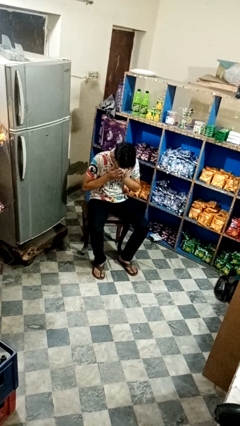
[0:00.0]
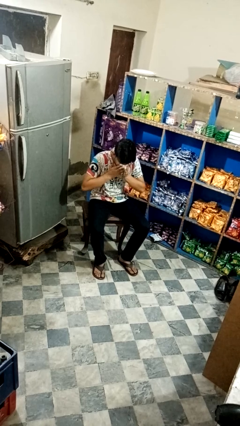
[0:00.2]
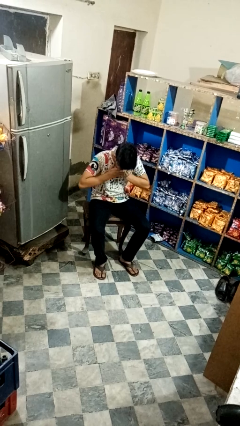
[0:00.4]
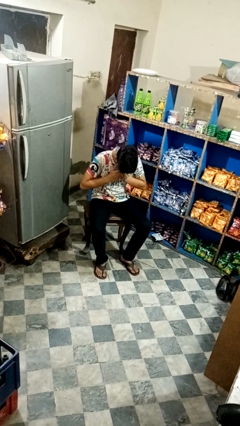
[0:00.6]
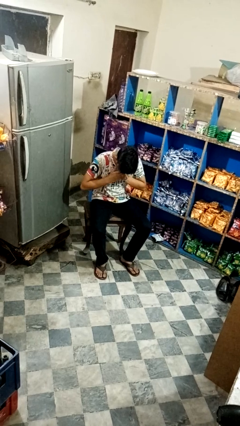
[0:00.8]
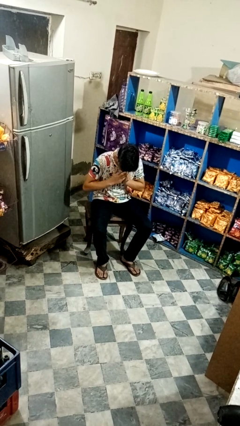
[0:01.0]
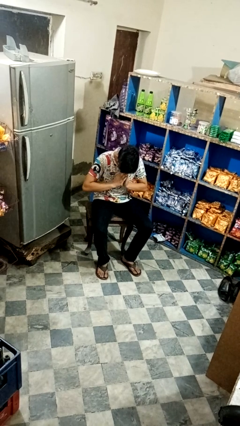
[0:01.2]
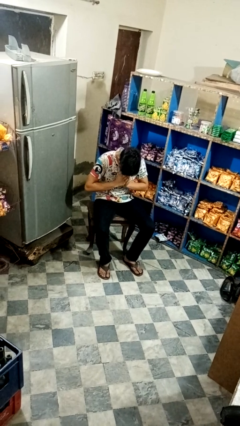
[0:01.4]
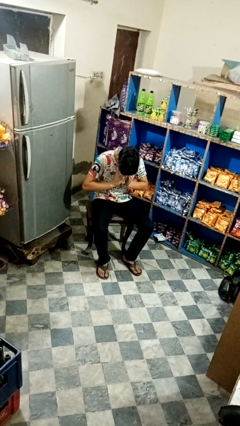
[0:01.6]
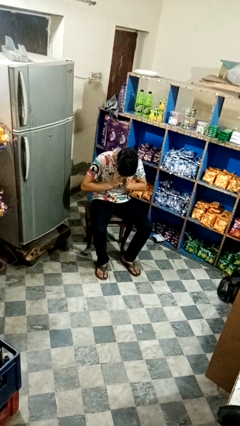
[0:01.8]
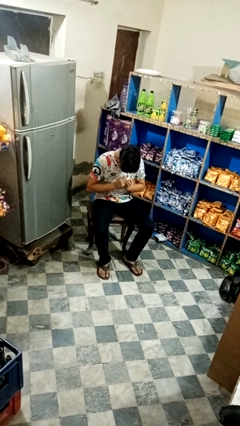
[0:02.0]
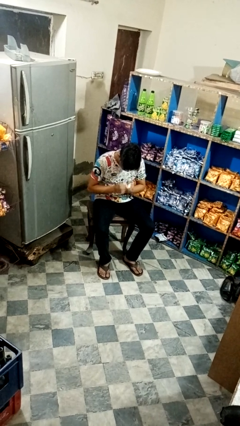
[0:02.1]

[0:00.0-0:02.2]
person blows nose

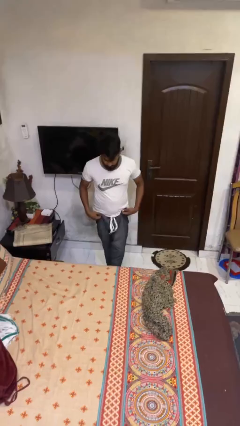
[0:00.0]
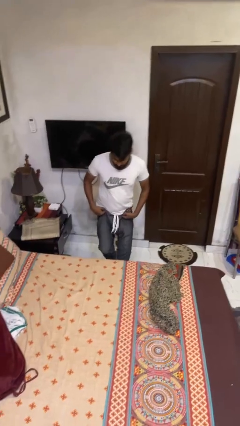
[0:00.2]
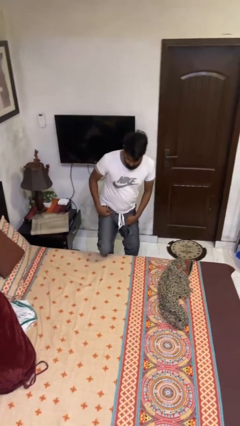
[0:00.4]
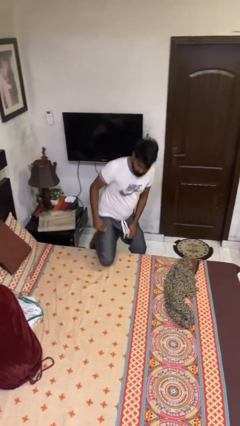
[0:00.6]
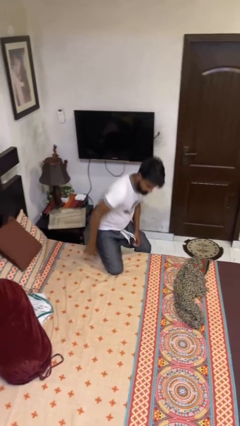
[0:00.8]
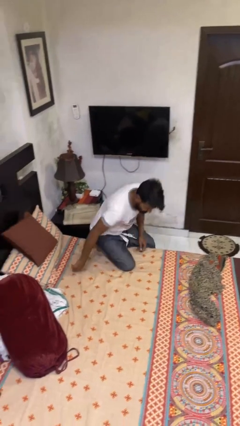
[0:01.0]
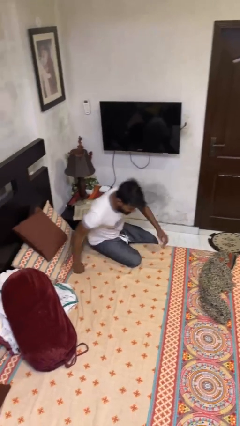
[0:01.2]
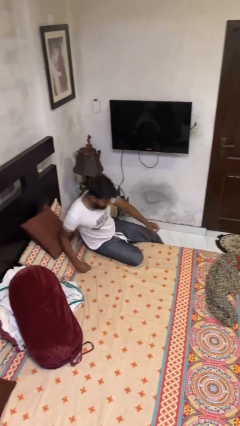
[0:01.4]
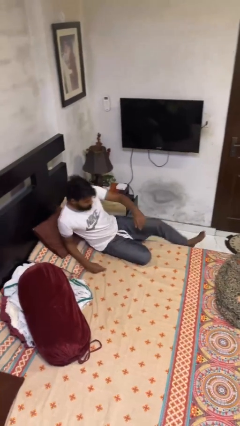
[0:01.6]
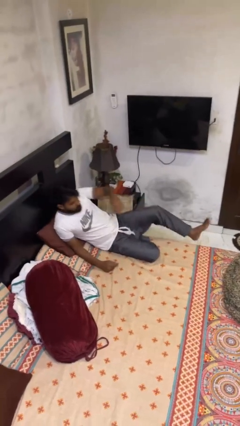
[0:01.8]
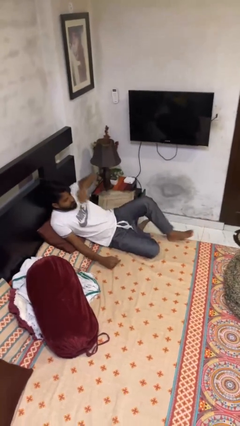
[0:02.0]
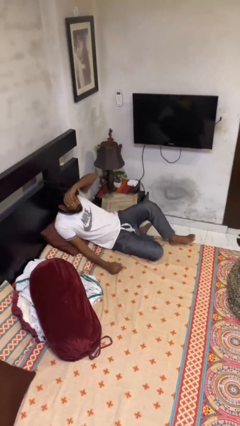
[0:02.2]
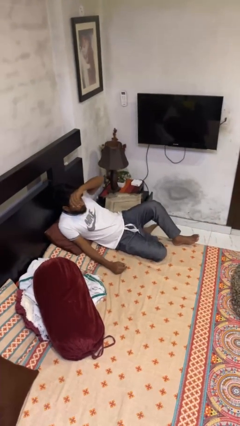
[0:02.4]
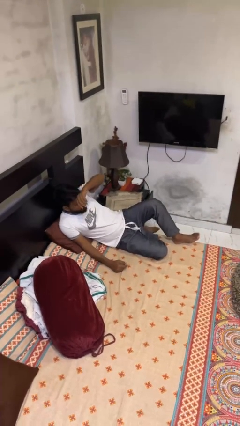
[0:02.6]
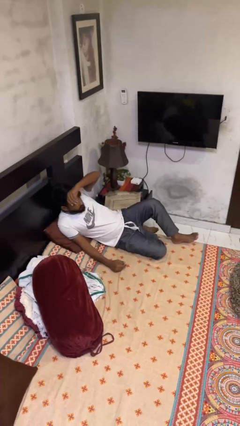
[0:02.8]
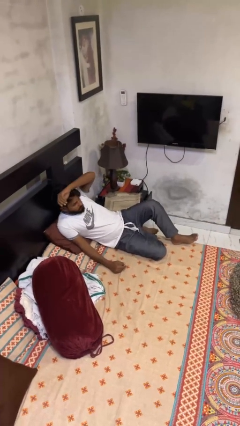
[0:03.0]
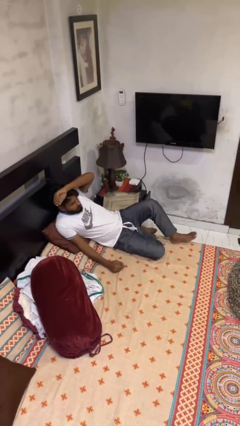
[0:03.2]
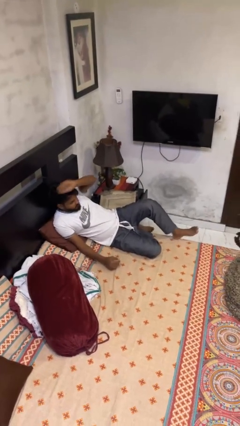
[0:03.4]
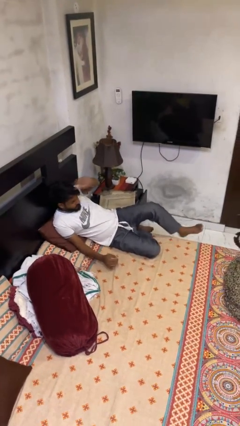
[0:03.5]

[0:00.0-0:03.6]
person lies down on bed

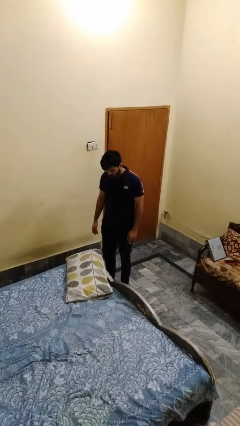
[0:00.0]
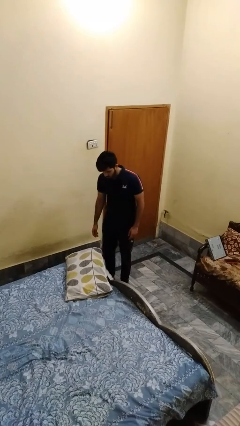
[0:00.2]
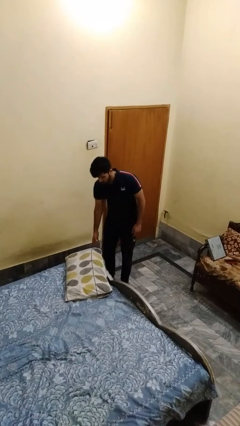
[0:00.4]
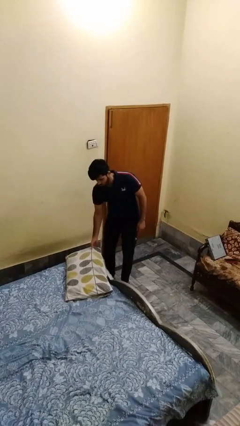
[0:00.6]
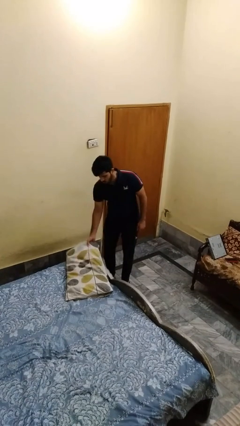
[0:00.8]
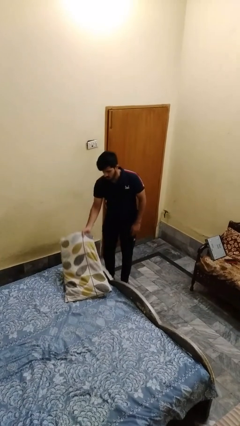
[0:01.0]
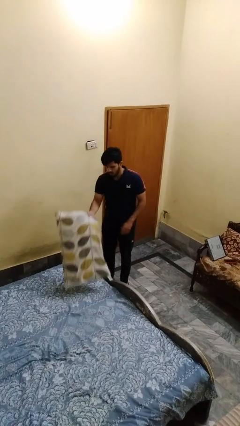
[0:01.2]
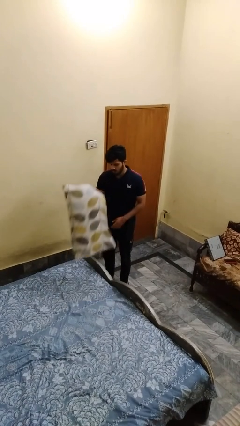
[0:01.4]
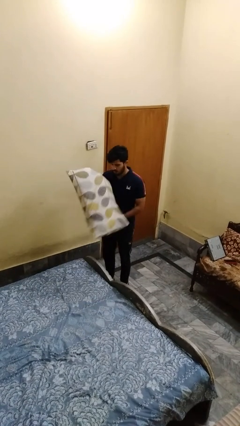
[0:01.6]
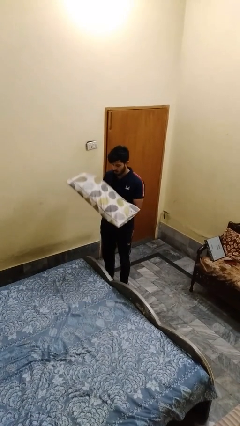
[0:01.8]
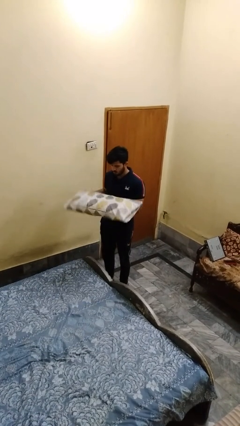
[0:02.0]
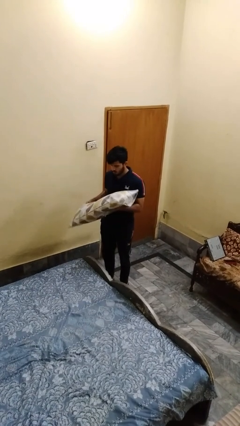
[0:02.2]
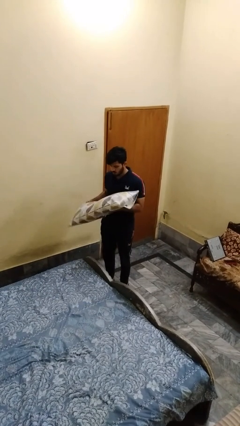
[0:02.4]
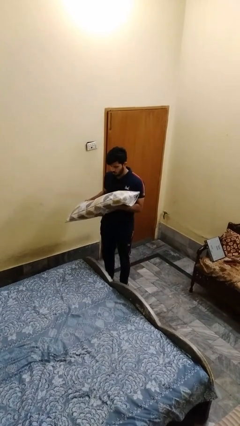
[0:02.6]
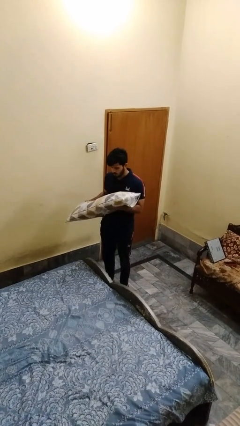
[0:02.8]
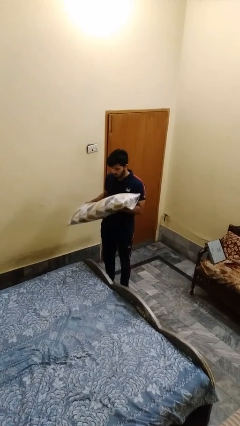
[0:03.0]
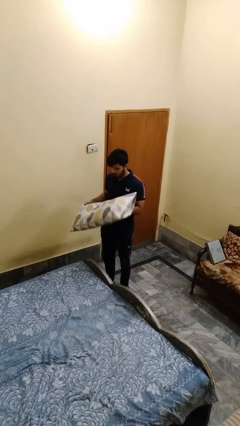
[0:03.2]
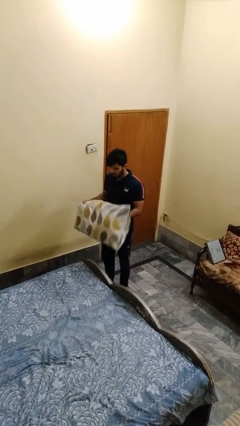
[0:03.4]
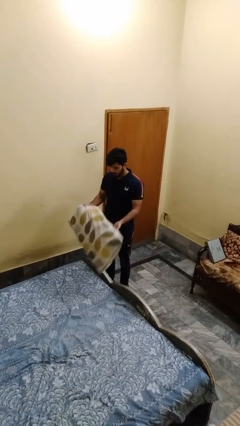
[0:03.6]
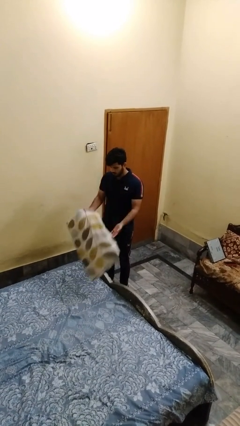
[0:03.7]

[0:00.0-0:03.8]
person picks up object from bed

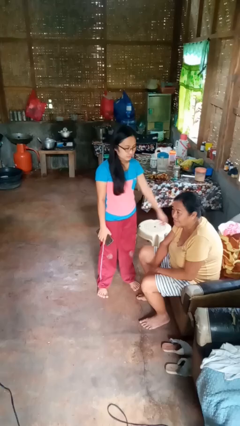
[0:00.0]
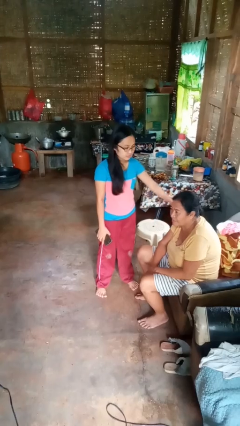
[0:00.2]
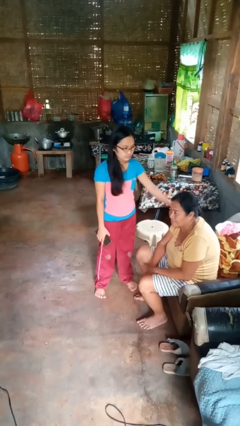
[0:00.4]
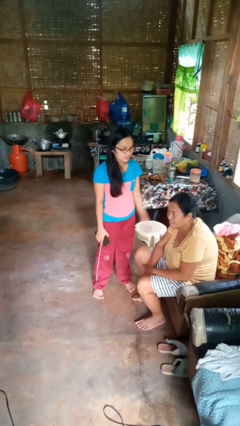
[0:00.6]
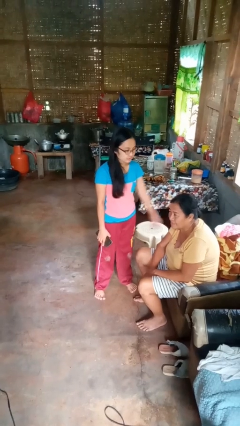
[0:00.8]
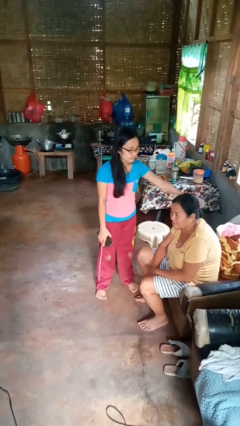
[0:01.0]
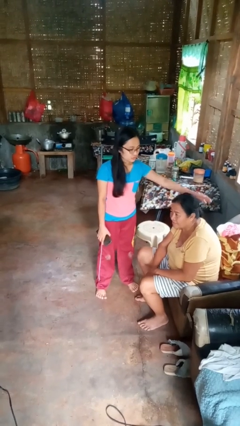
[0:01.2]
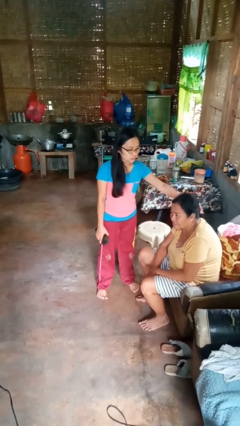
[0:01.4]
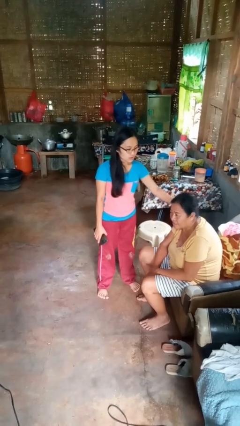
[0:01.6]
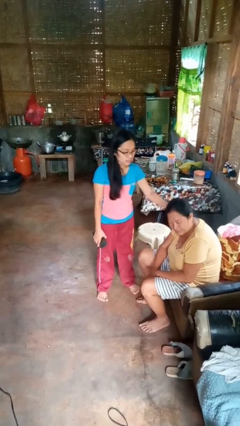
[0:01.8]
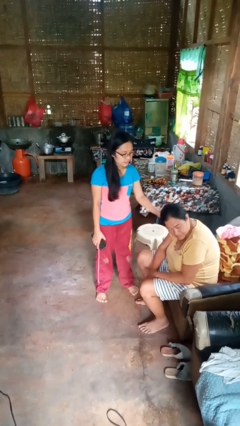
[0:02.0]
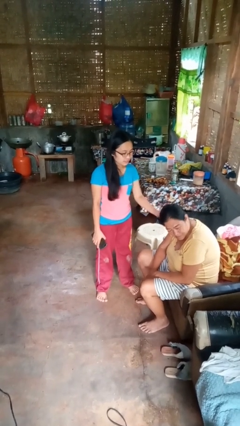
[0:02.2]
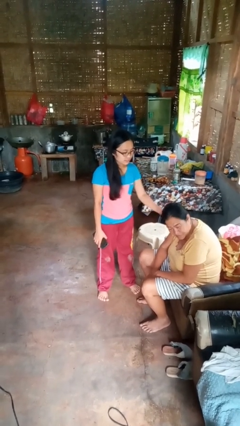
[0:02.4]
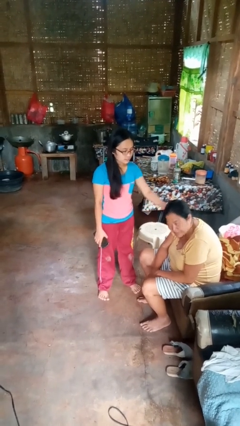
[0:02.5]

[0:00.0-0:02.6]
person grabs person by hair

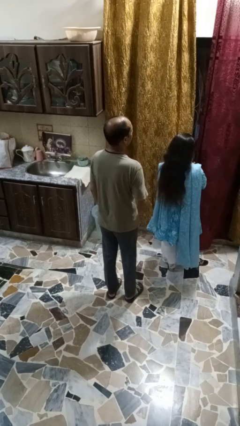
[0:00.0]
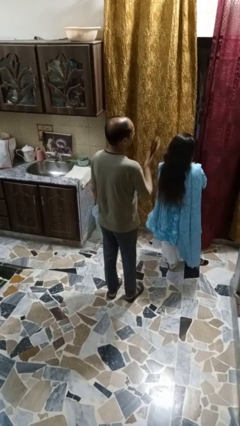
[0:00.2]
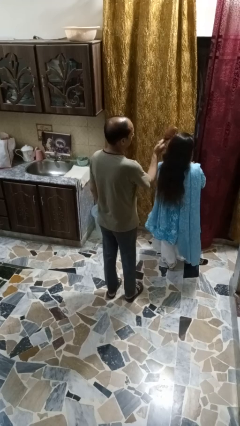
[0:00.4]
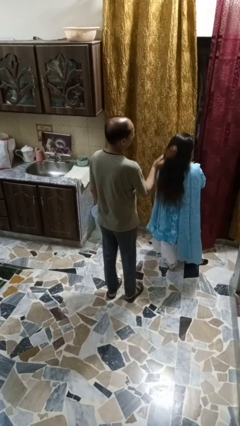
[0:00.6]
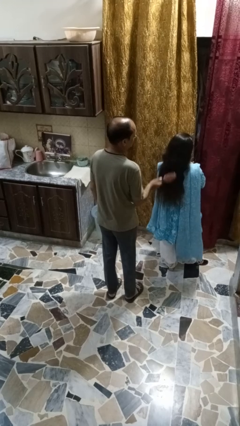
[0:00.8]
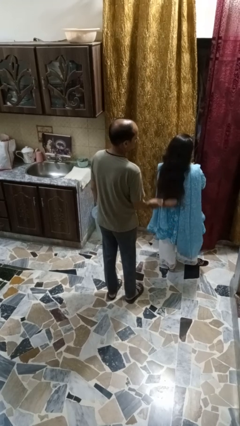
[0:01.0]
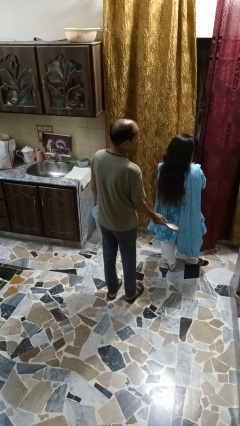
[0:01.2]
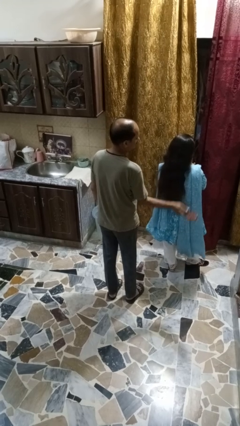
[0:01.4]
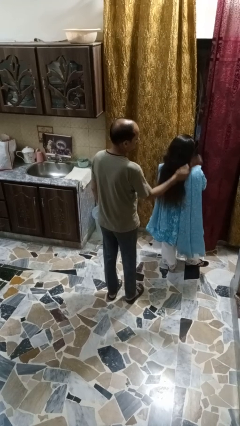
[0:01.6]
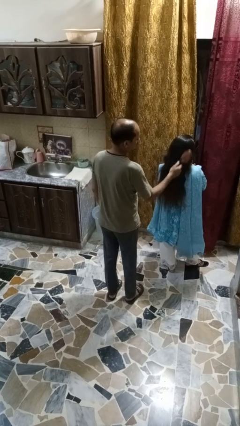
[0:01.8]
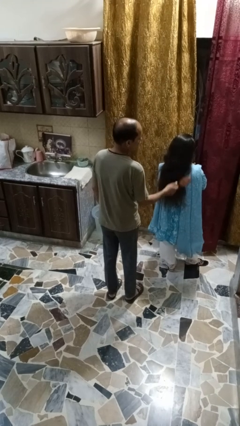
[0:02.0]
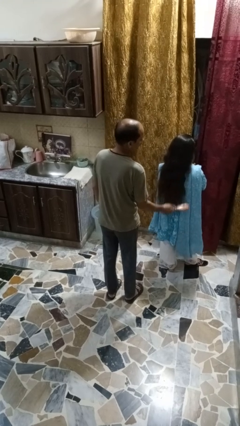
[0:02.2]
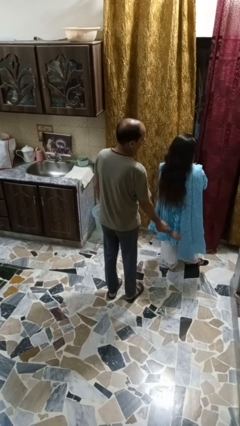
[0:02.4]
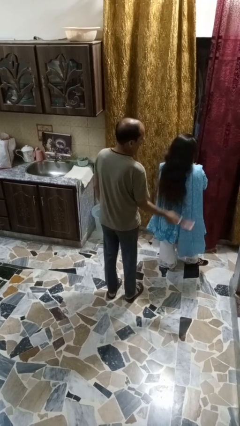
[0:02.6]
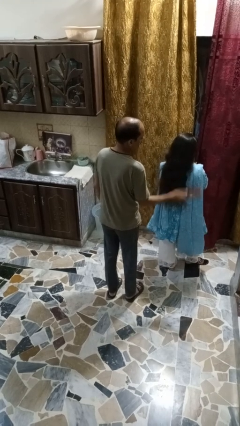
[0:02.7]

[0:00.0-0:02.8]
person brushes hair of person

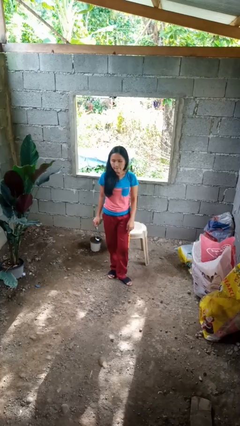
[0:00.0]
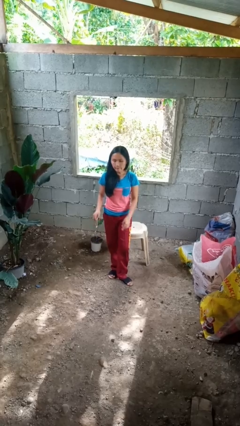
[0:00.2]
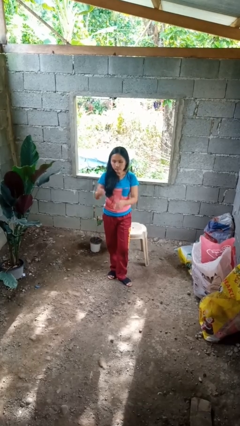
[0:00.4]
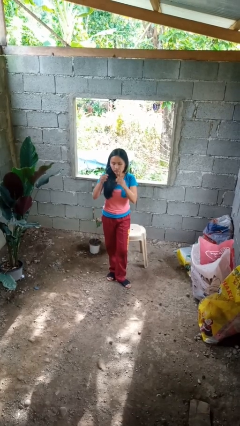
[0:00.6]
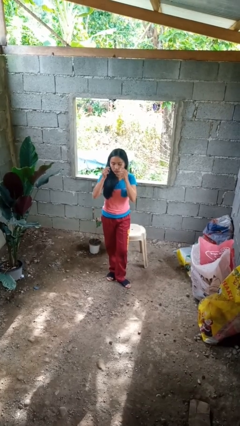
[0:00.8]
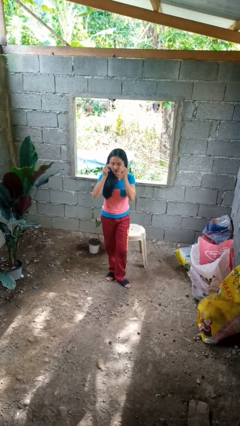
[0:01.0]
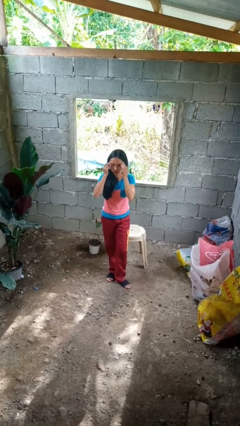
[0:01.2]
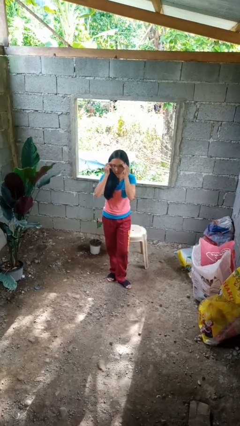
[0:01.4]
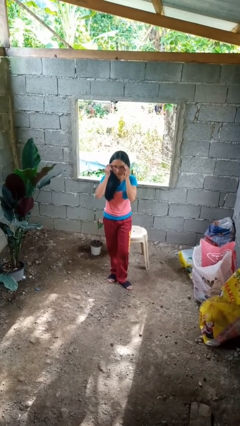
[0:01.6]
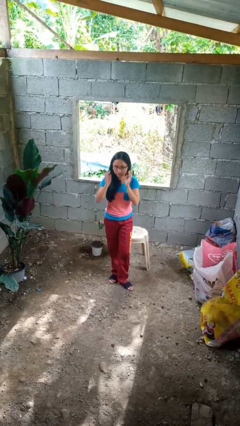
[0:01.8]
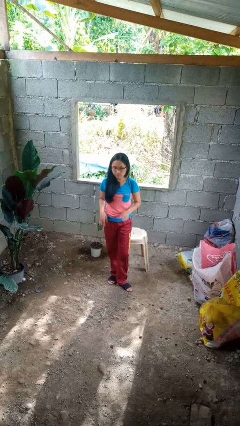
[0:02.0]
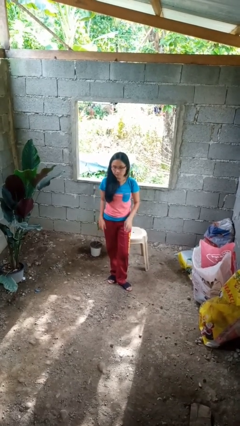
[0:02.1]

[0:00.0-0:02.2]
person puts on glasses
